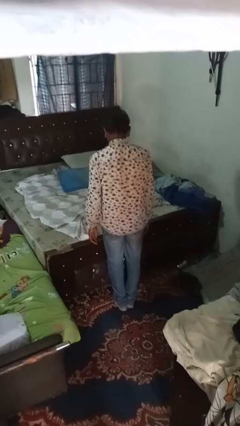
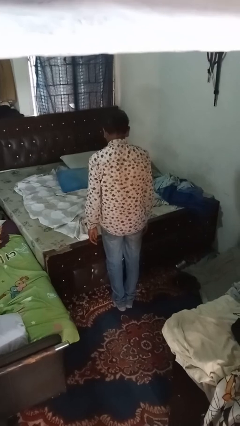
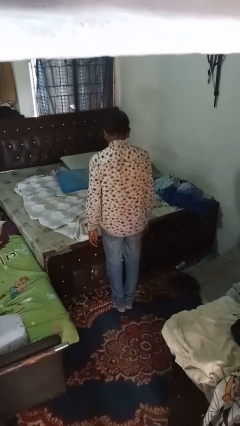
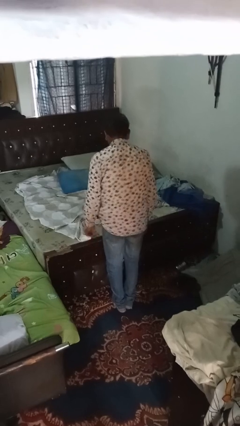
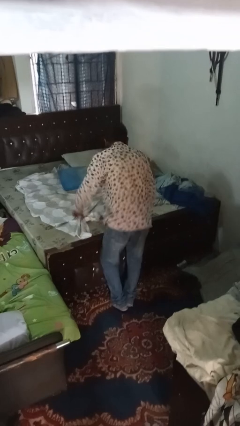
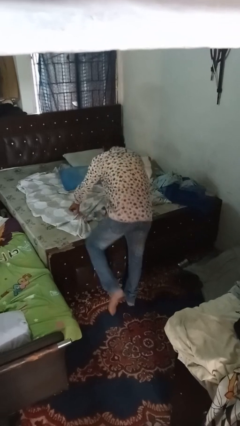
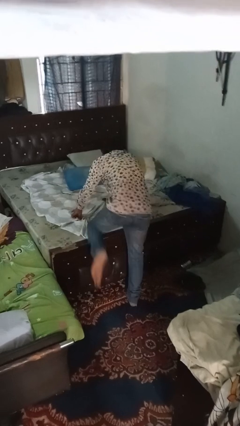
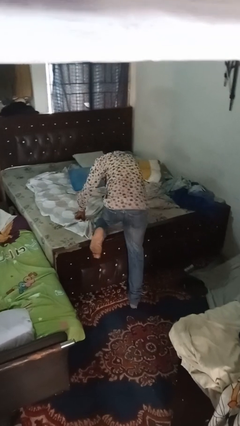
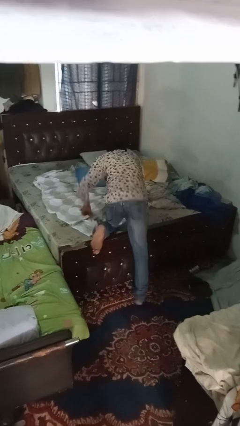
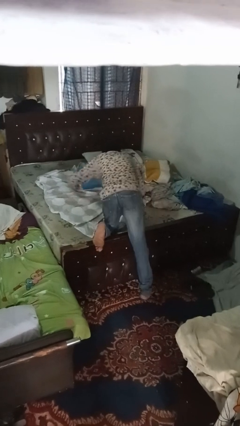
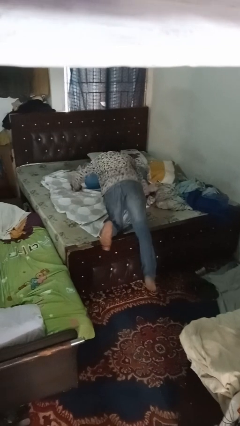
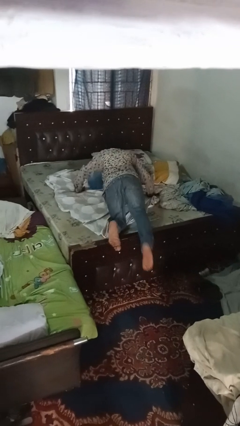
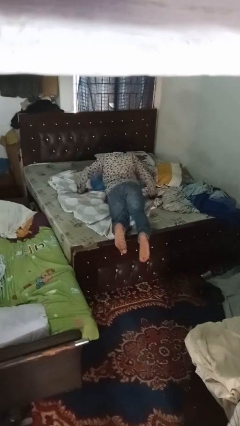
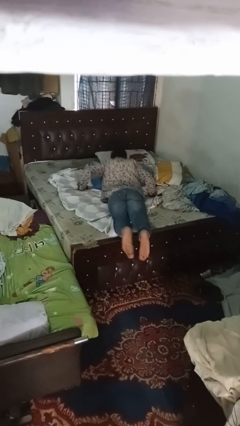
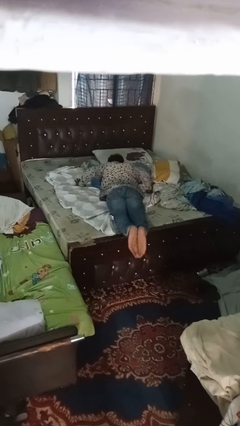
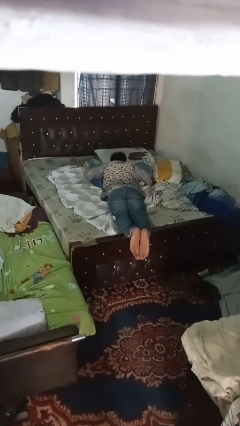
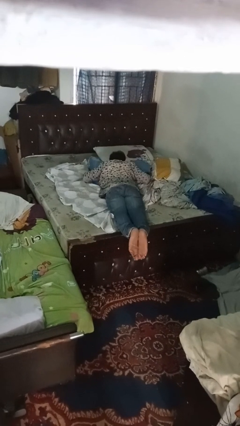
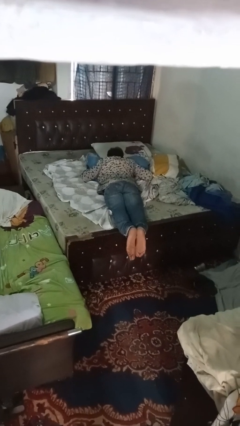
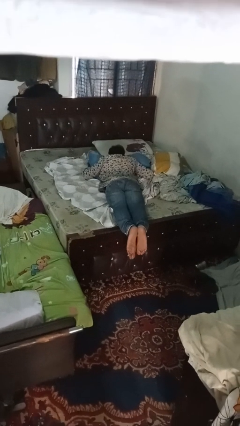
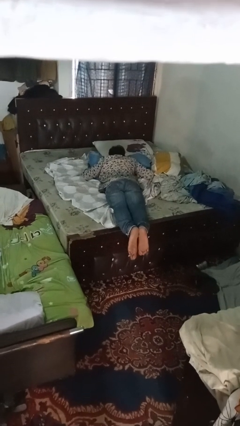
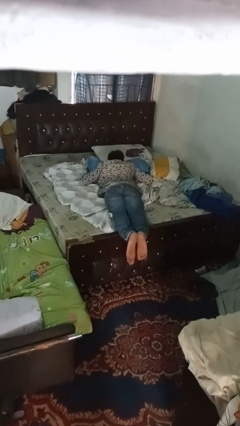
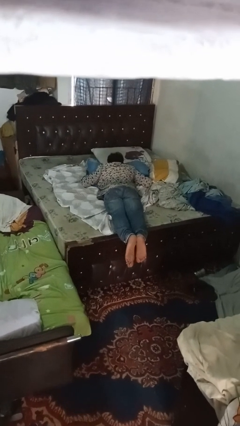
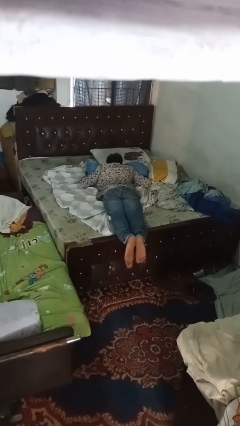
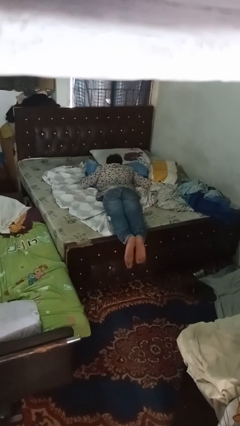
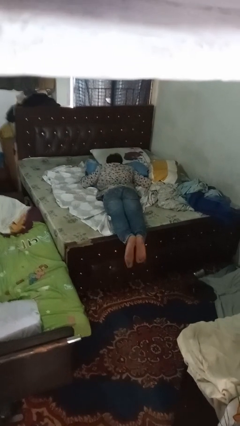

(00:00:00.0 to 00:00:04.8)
person lies down on bed

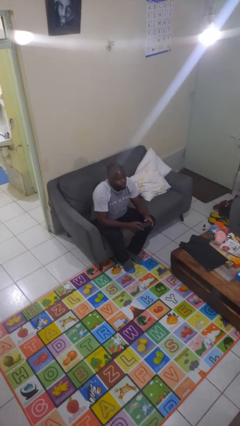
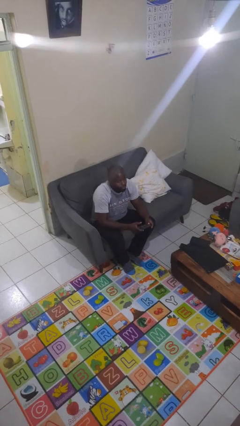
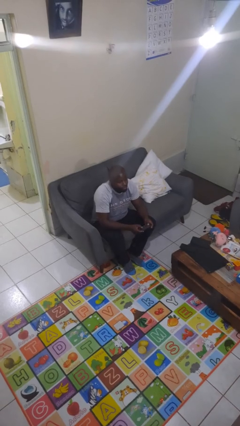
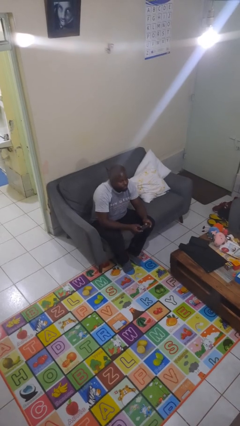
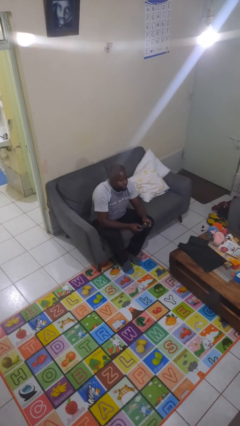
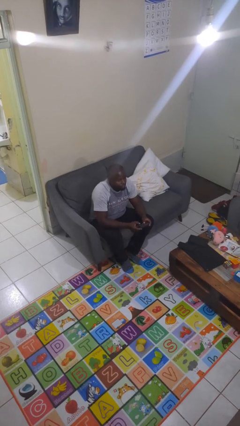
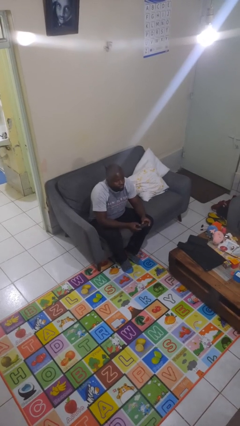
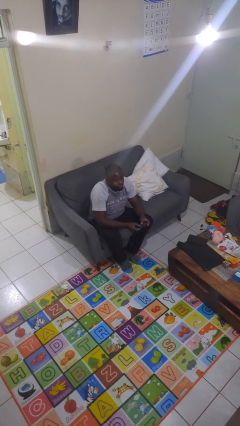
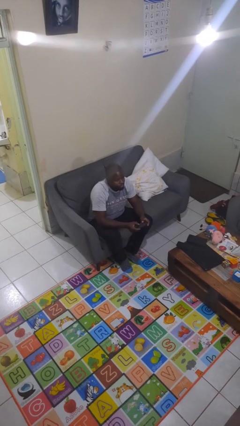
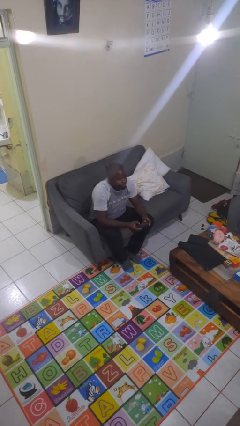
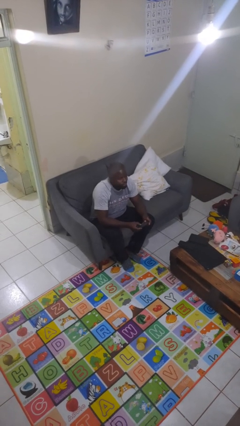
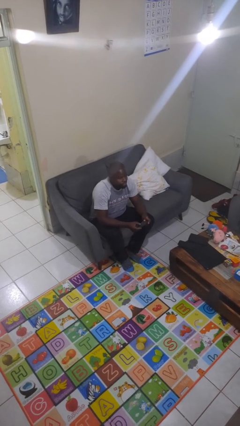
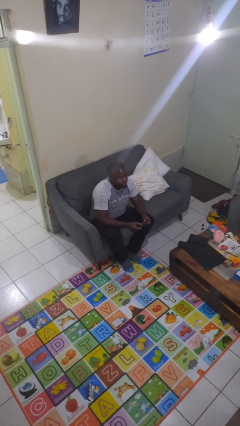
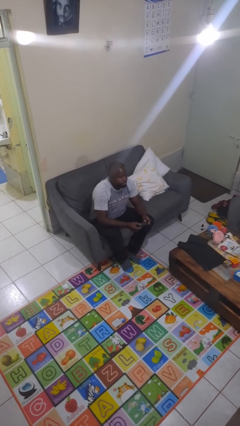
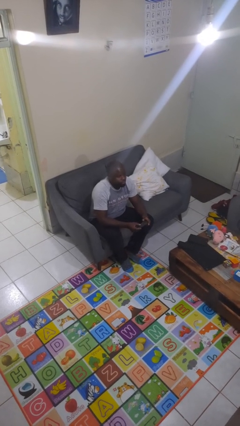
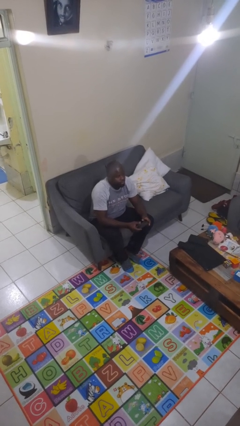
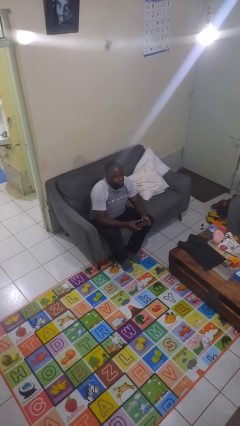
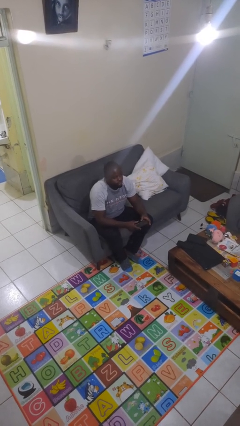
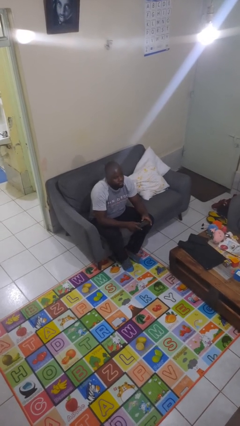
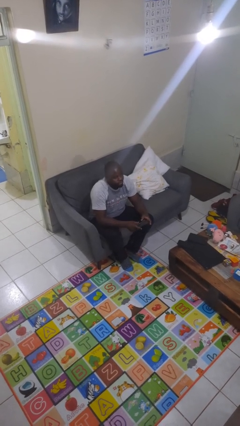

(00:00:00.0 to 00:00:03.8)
person interacts with handheld game

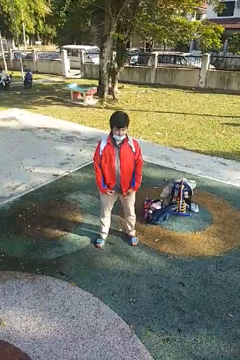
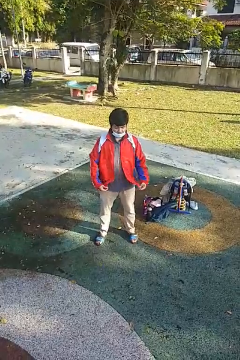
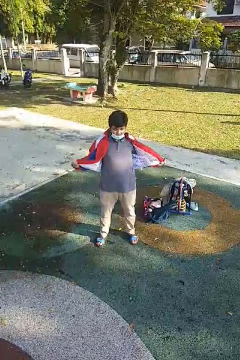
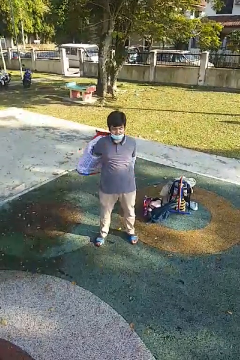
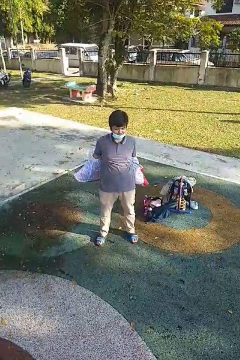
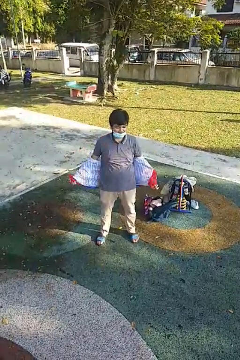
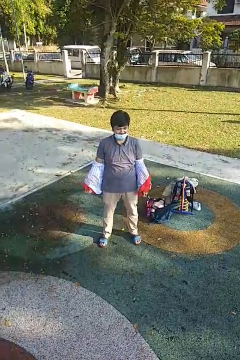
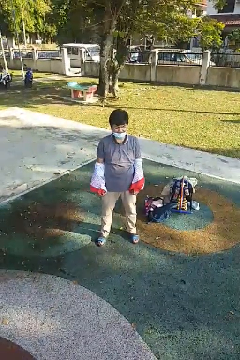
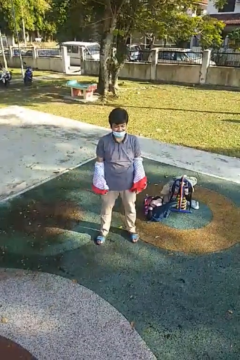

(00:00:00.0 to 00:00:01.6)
person takes off jacket

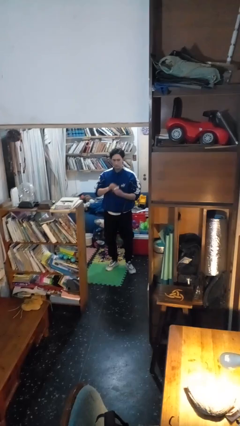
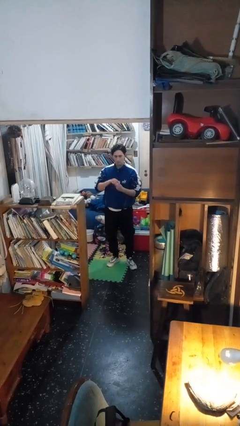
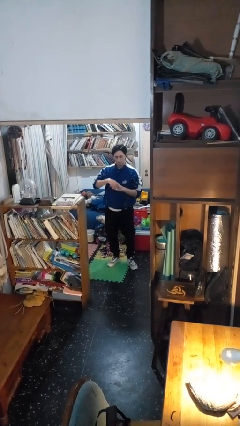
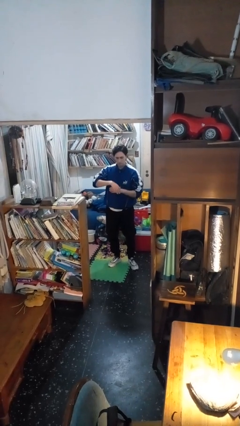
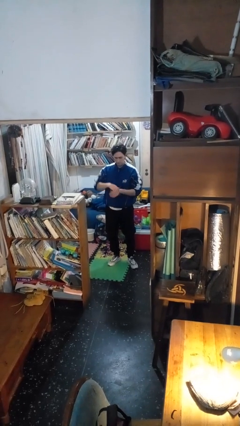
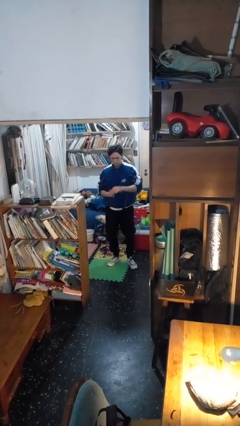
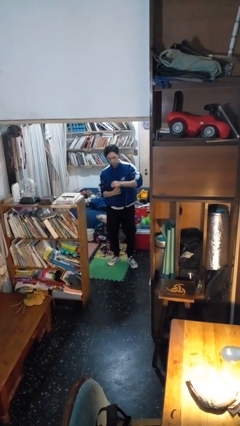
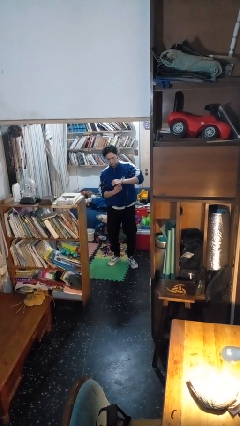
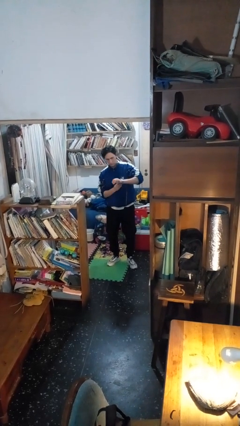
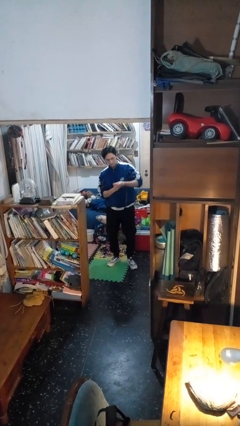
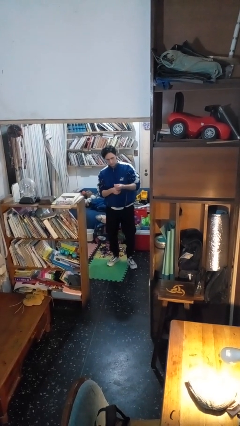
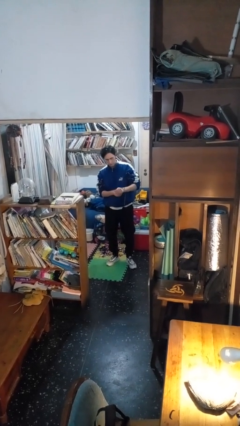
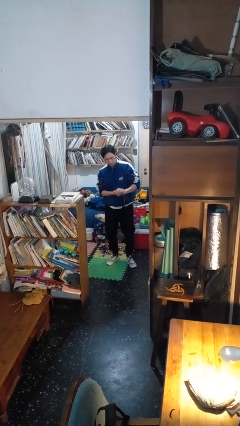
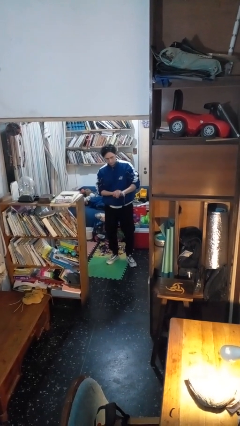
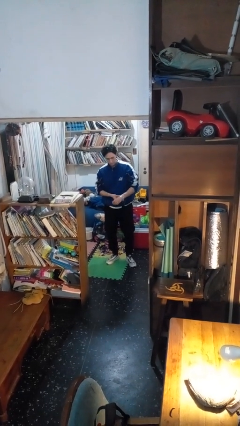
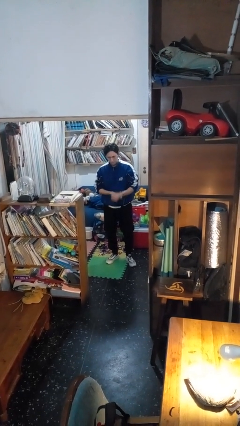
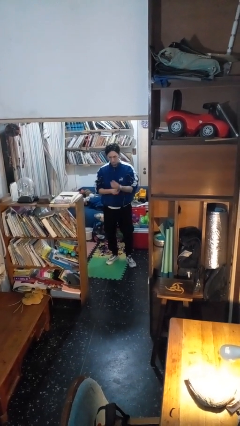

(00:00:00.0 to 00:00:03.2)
person puts on wristwatch

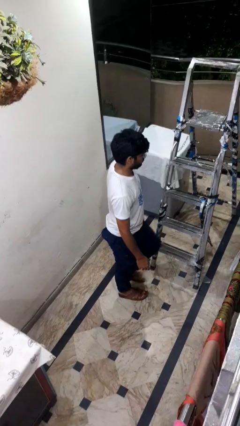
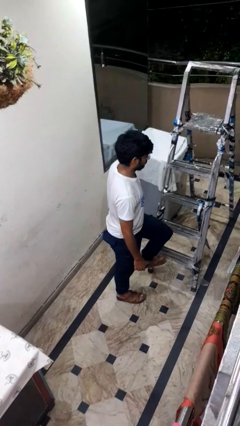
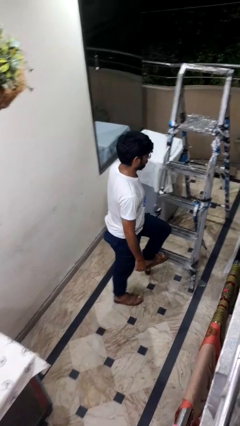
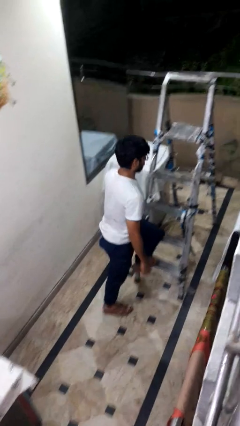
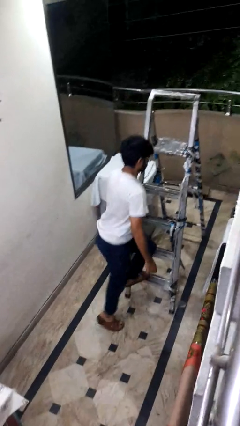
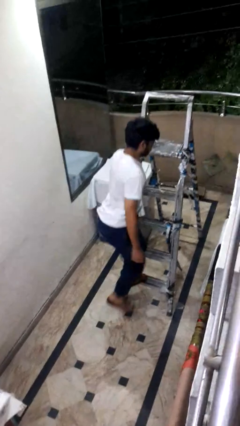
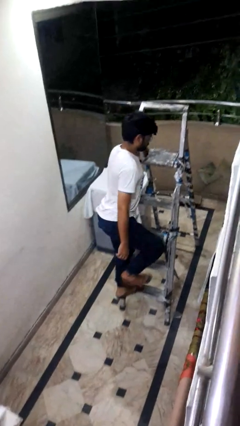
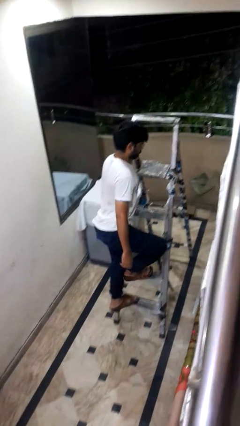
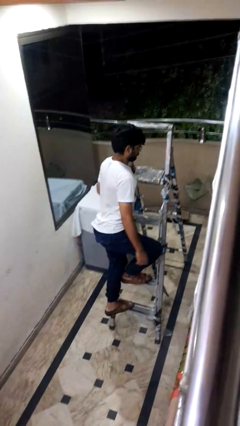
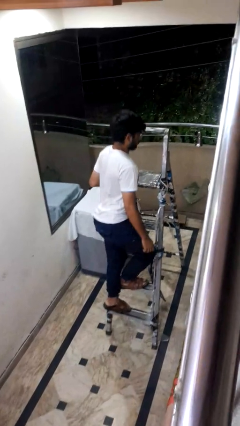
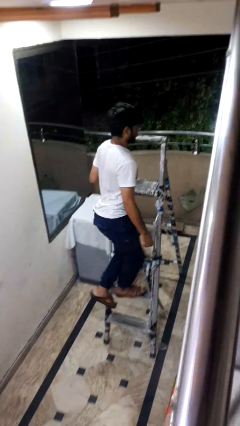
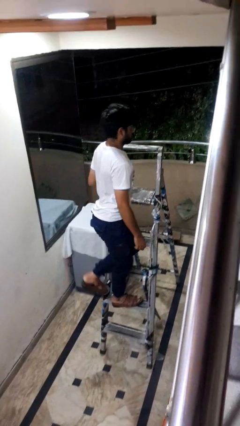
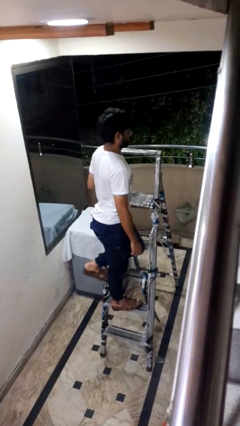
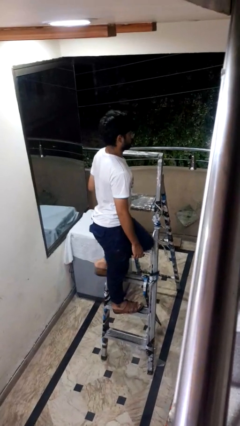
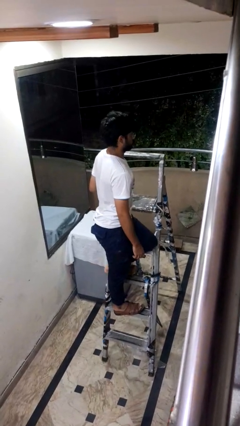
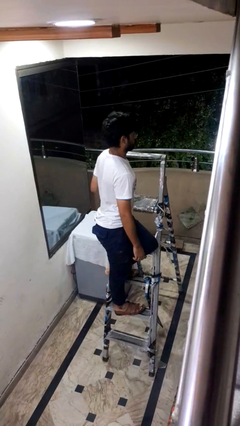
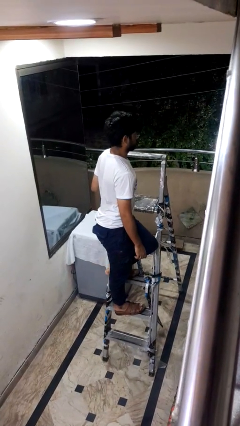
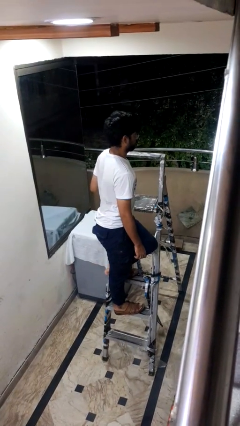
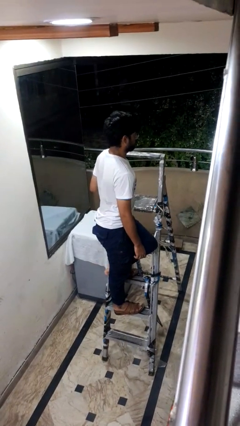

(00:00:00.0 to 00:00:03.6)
person climbs up ladder

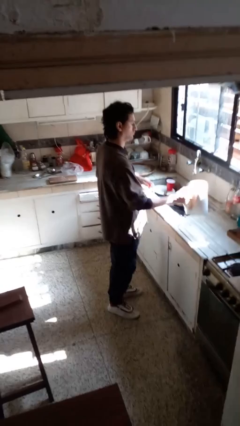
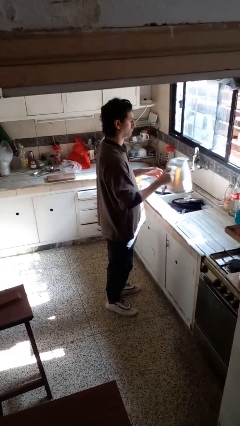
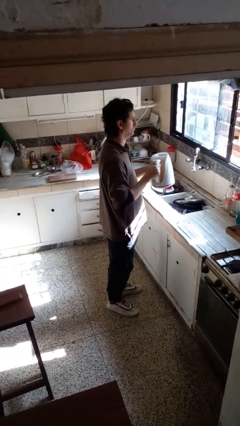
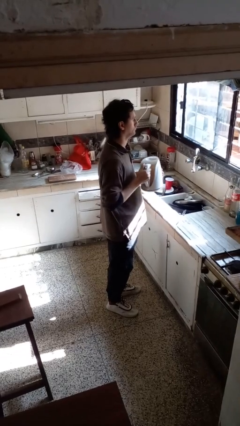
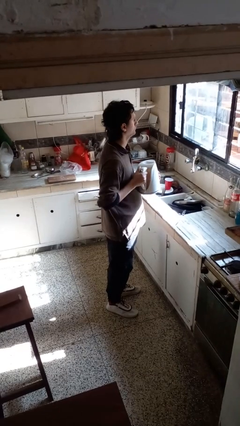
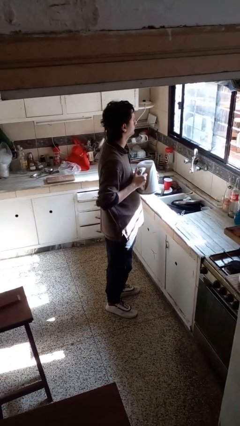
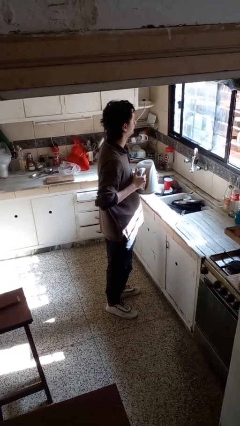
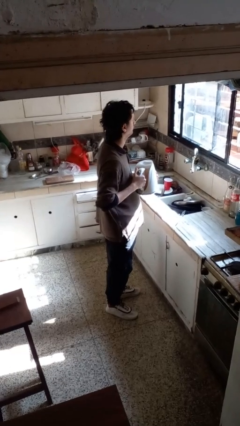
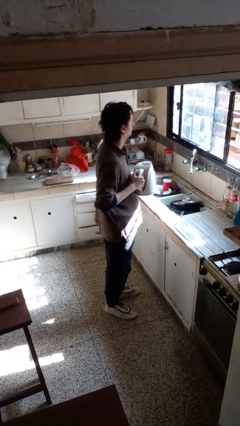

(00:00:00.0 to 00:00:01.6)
person picks up object from countertop
